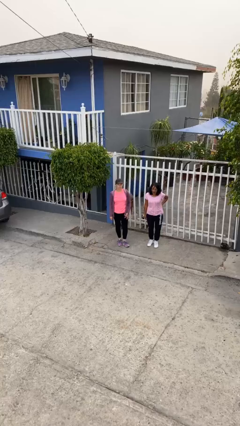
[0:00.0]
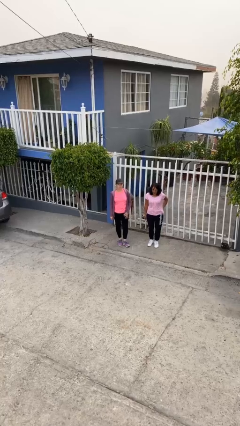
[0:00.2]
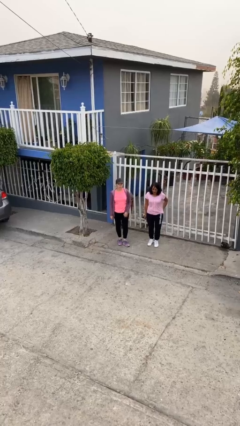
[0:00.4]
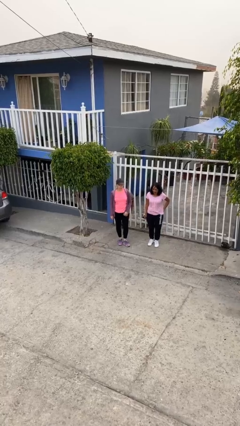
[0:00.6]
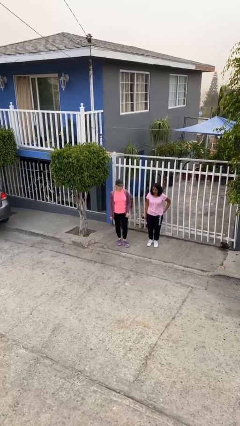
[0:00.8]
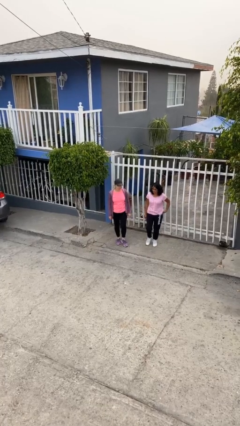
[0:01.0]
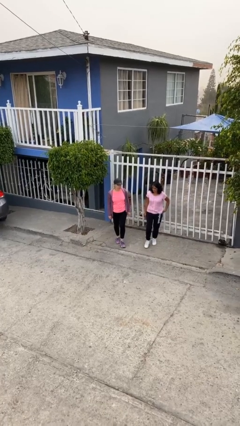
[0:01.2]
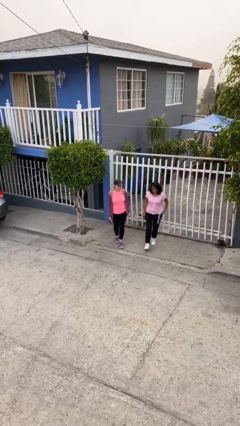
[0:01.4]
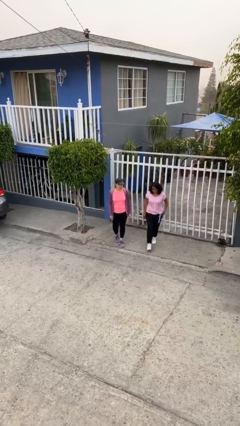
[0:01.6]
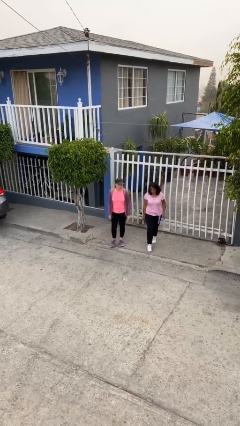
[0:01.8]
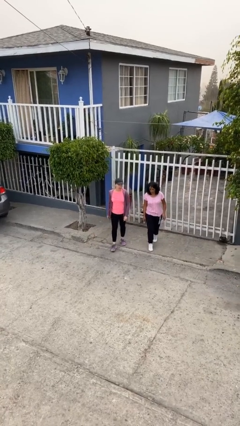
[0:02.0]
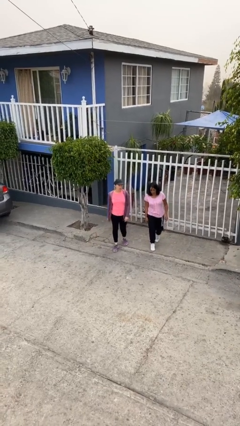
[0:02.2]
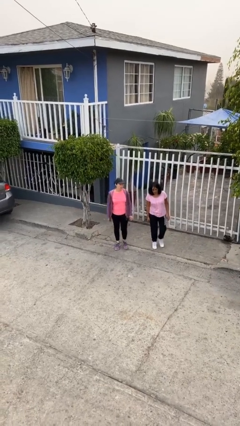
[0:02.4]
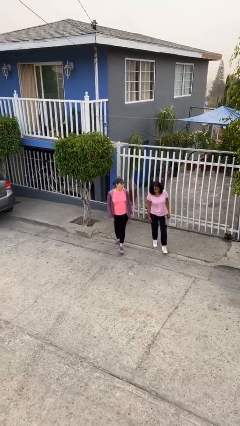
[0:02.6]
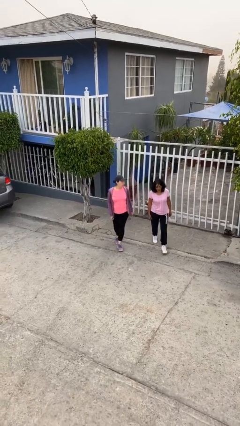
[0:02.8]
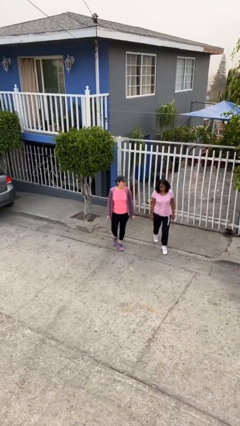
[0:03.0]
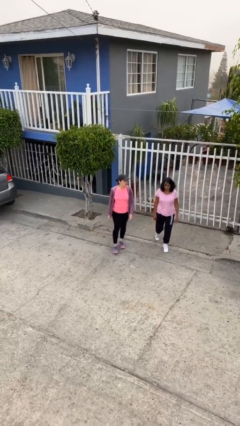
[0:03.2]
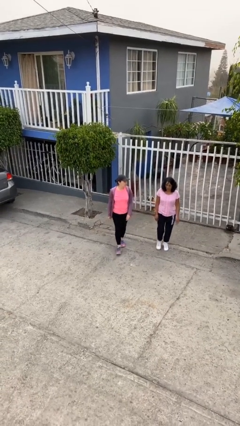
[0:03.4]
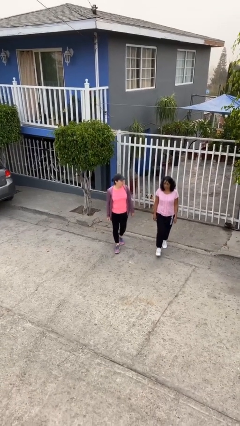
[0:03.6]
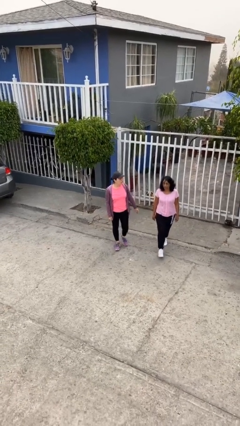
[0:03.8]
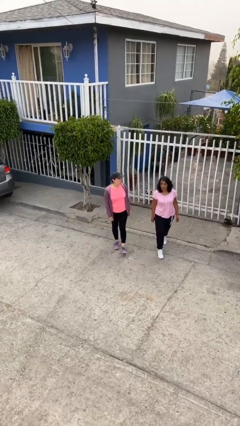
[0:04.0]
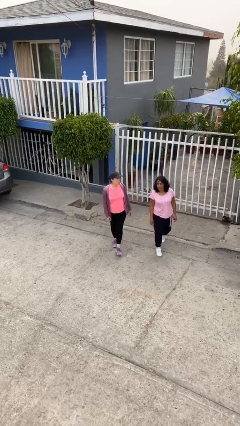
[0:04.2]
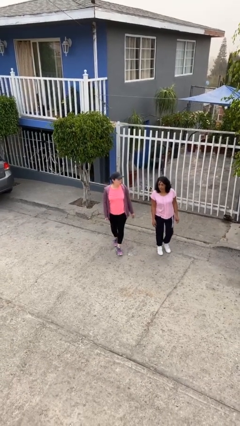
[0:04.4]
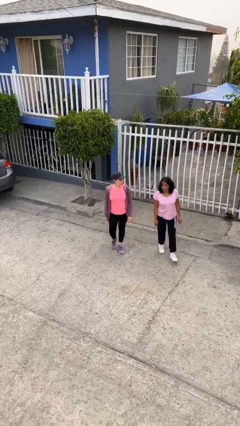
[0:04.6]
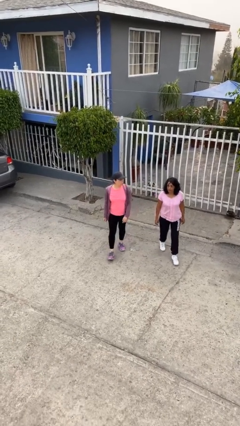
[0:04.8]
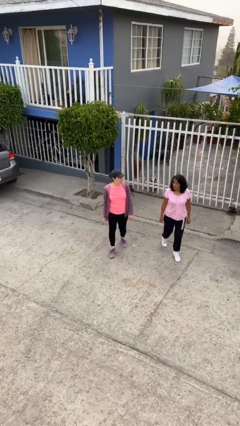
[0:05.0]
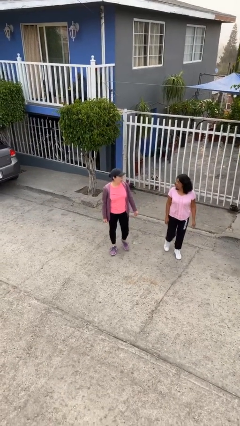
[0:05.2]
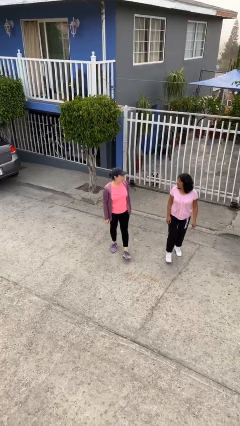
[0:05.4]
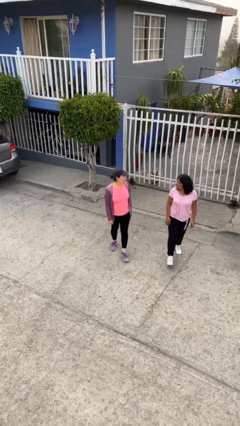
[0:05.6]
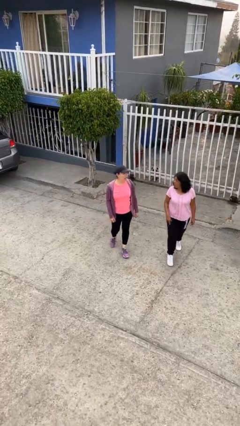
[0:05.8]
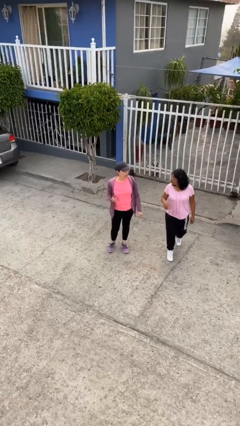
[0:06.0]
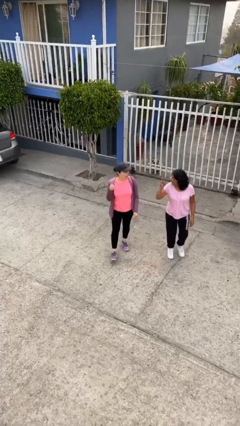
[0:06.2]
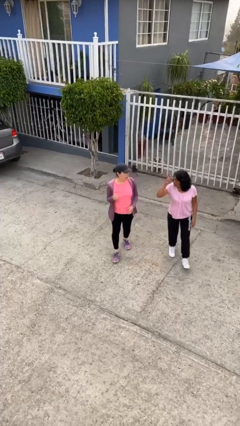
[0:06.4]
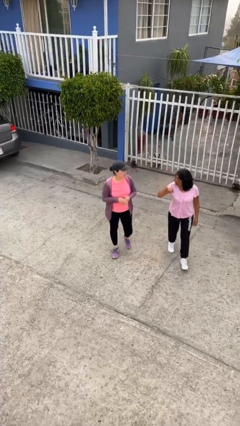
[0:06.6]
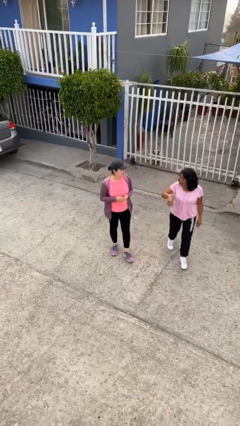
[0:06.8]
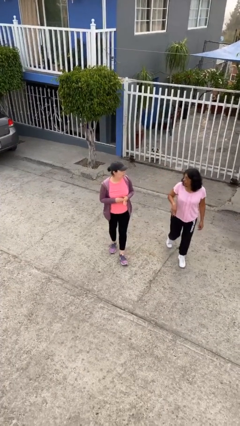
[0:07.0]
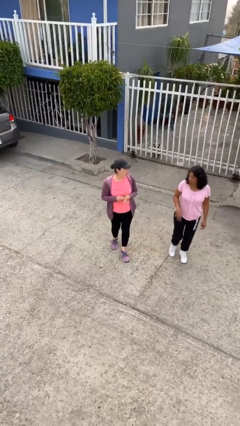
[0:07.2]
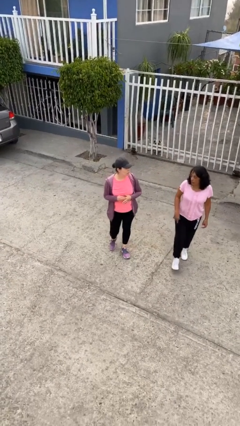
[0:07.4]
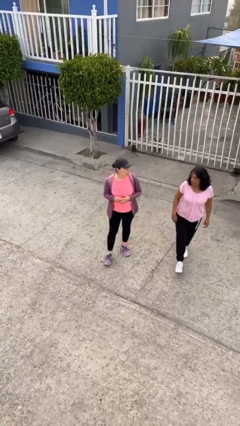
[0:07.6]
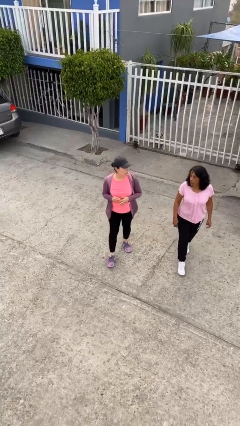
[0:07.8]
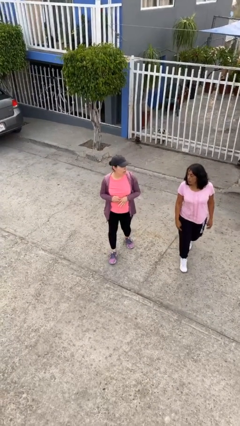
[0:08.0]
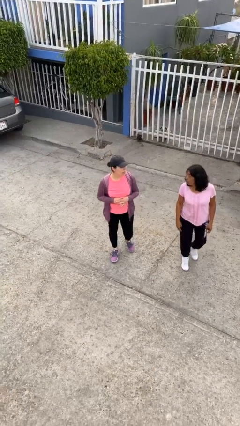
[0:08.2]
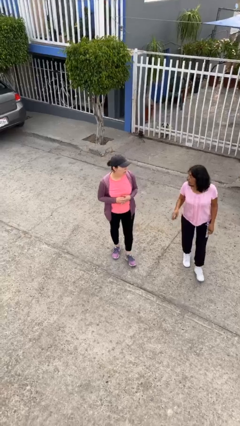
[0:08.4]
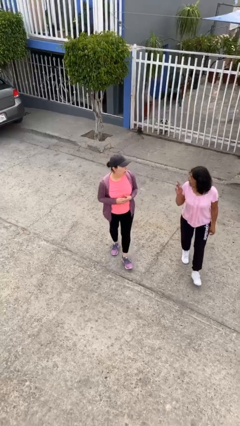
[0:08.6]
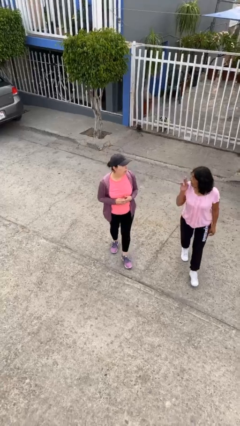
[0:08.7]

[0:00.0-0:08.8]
person talks to person

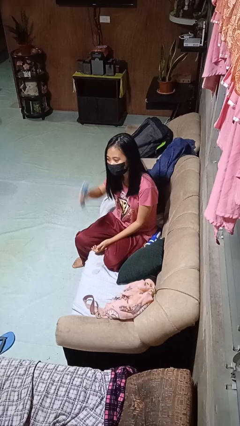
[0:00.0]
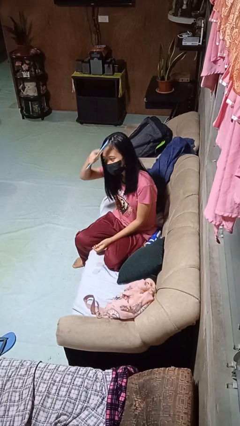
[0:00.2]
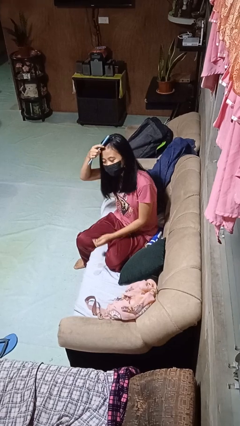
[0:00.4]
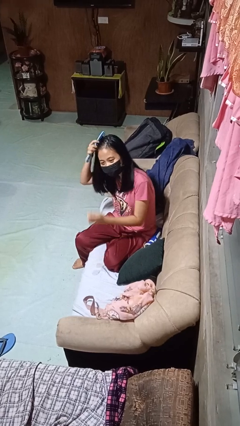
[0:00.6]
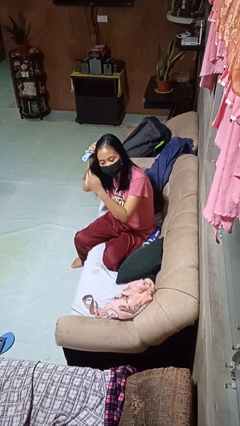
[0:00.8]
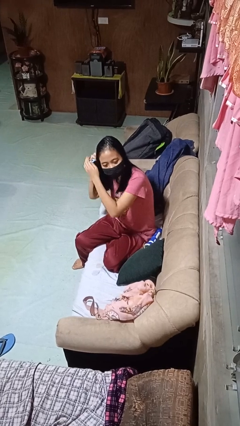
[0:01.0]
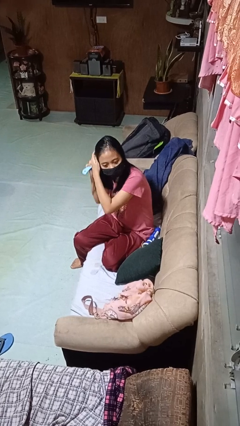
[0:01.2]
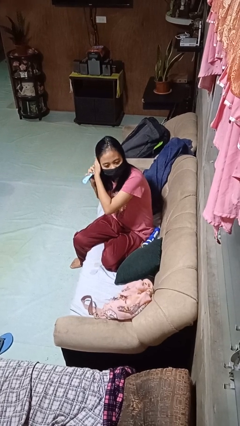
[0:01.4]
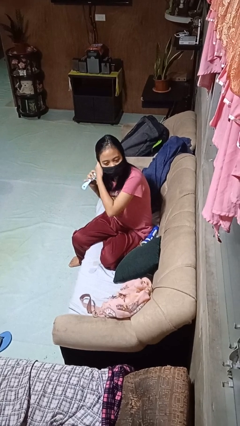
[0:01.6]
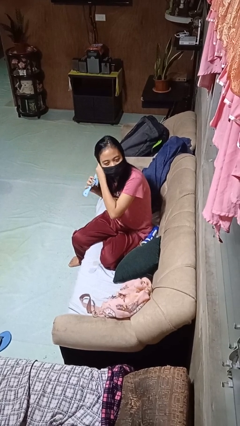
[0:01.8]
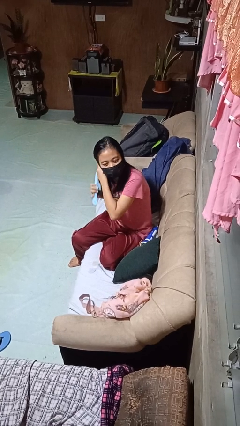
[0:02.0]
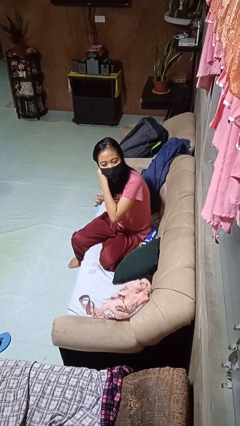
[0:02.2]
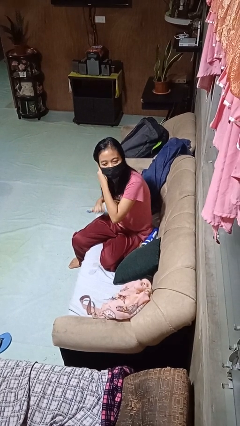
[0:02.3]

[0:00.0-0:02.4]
person brushes hair

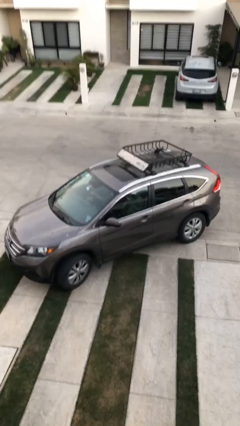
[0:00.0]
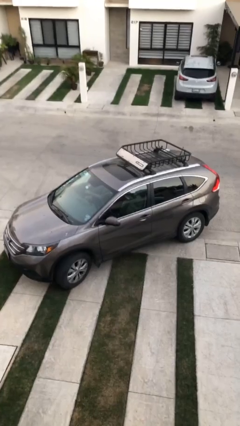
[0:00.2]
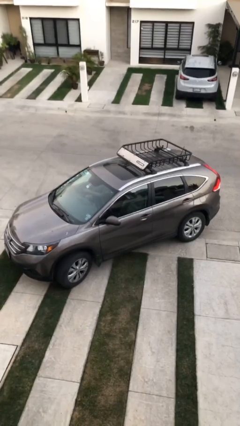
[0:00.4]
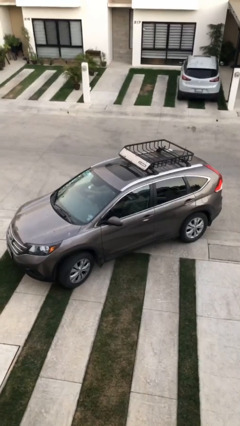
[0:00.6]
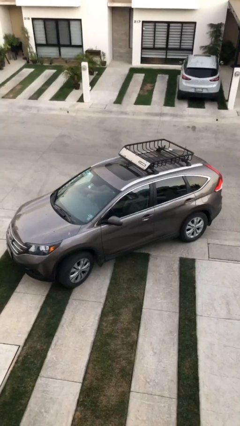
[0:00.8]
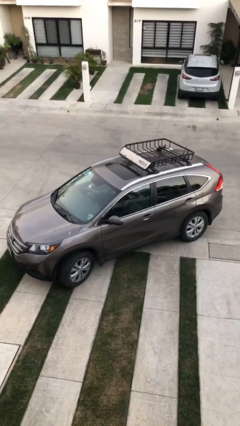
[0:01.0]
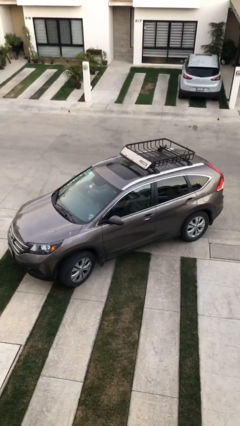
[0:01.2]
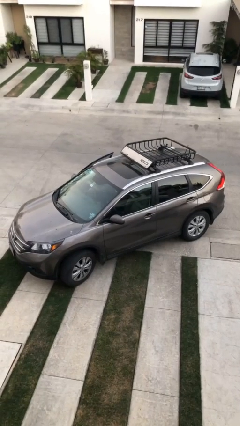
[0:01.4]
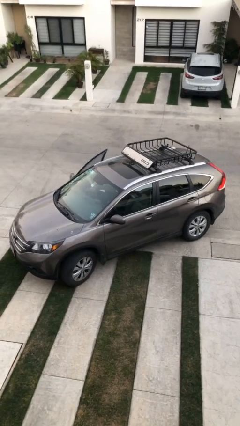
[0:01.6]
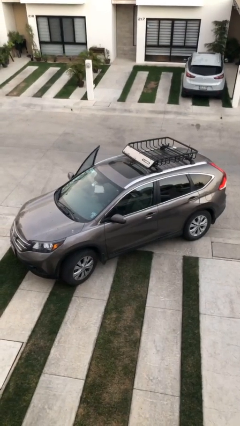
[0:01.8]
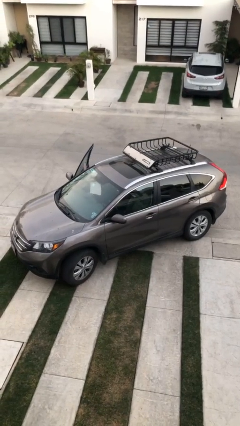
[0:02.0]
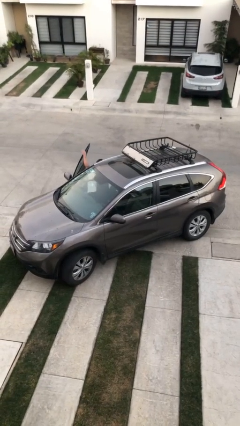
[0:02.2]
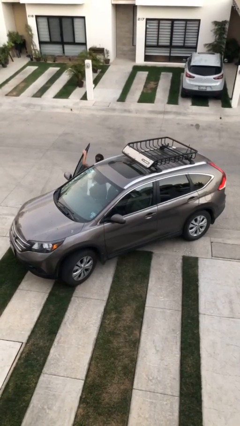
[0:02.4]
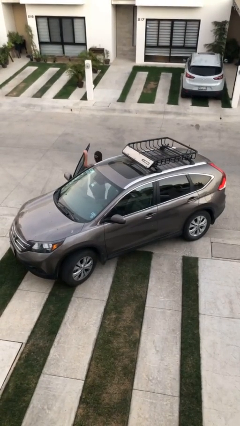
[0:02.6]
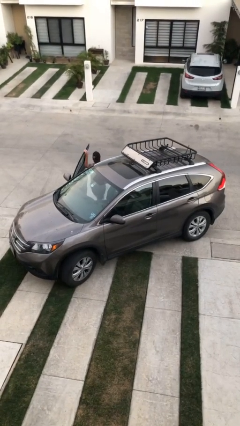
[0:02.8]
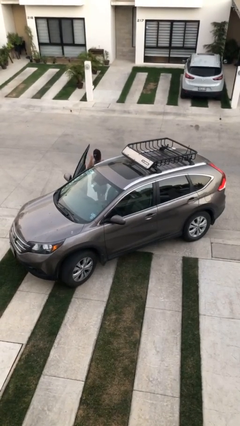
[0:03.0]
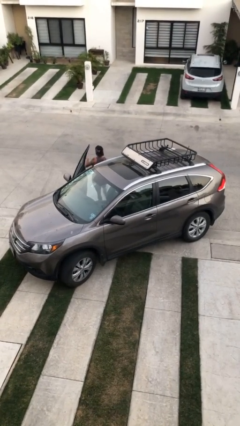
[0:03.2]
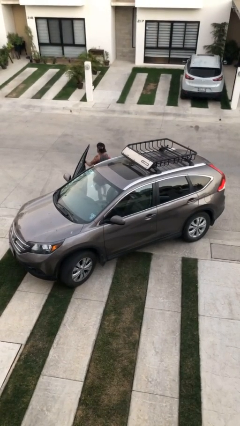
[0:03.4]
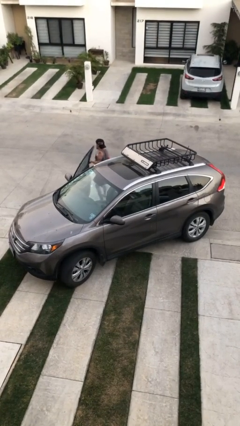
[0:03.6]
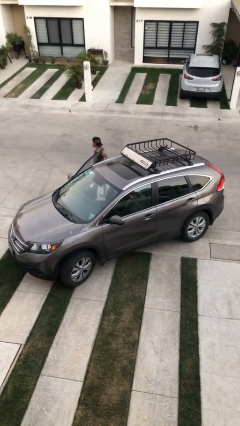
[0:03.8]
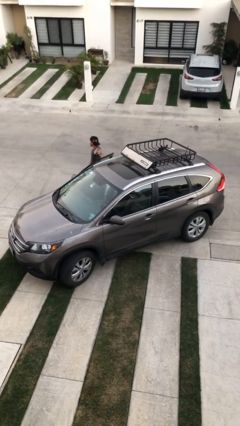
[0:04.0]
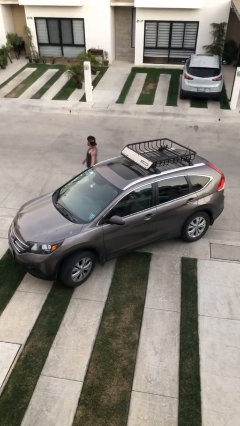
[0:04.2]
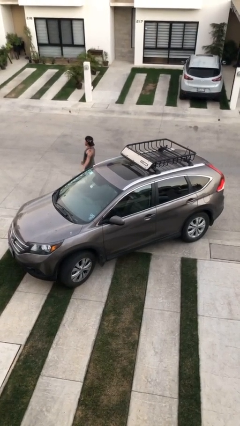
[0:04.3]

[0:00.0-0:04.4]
car drops off person

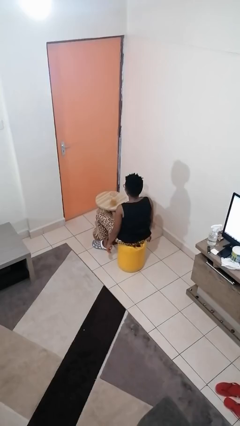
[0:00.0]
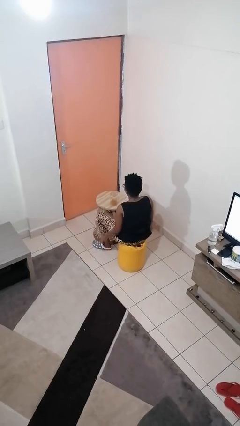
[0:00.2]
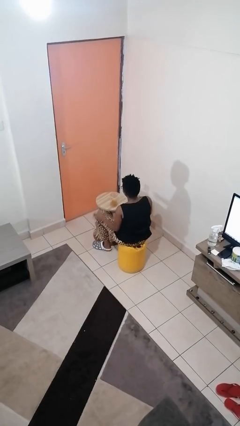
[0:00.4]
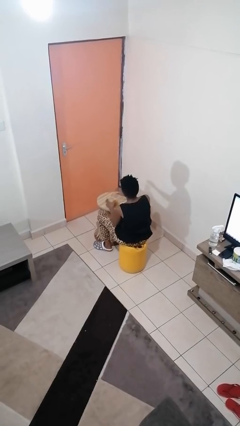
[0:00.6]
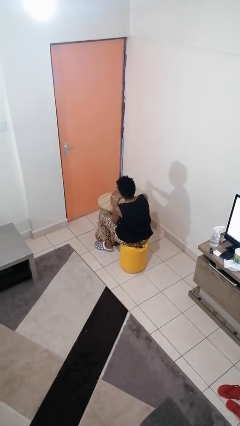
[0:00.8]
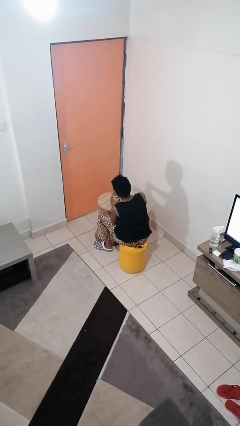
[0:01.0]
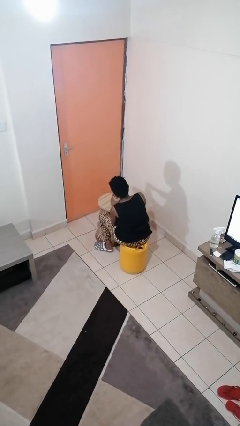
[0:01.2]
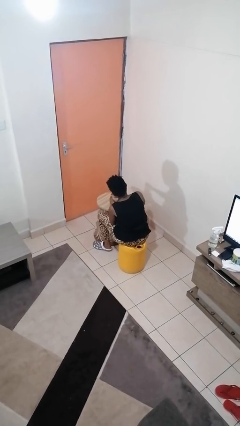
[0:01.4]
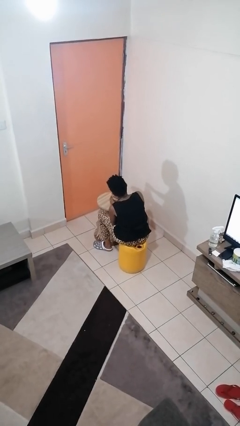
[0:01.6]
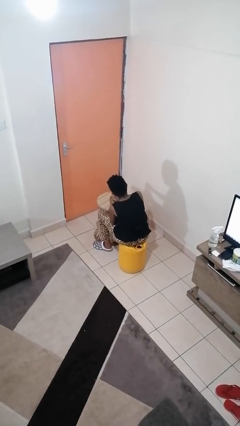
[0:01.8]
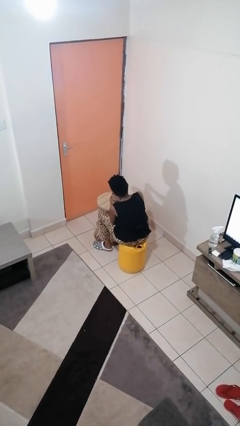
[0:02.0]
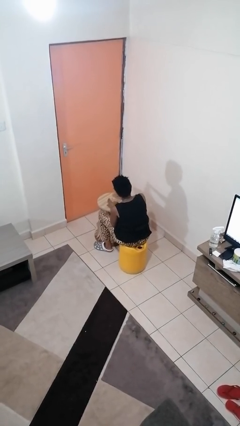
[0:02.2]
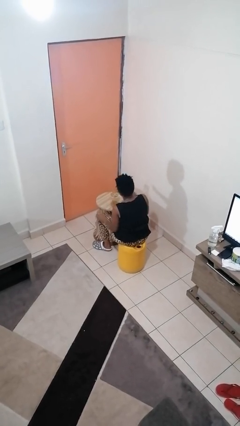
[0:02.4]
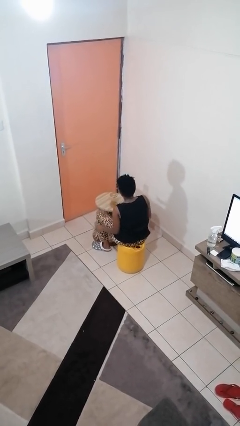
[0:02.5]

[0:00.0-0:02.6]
person closes jar
